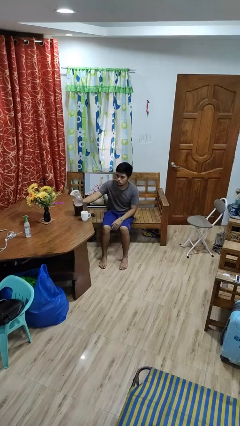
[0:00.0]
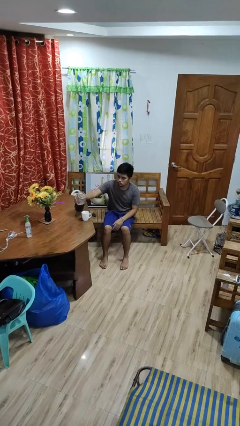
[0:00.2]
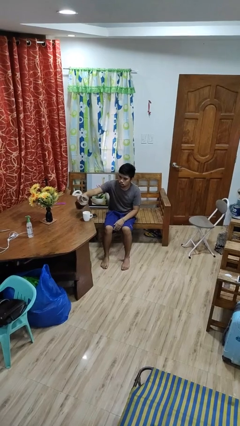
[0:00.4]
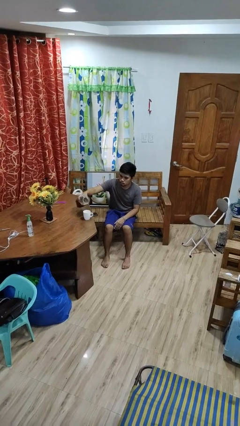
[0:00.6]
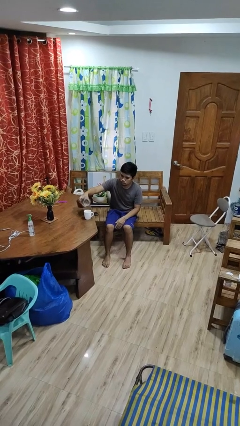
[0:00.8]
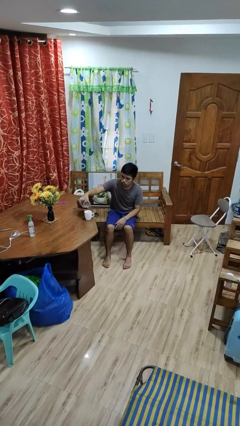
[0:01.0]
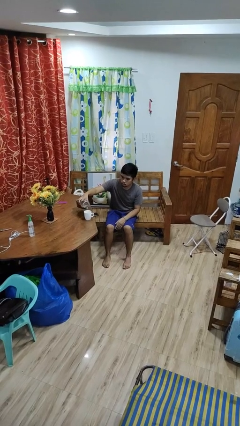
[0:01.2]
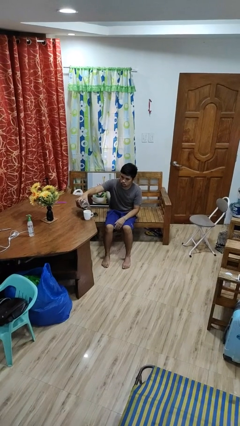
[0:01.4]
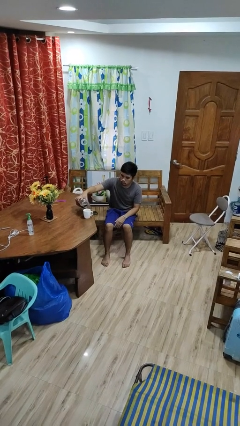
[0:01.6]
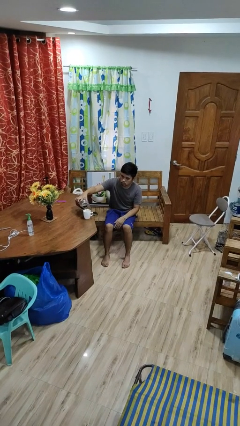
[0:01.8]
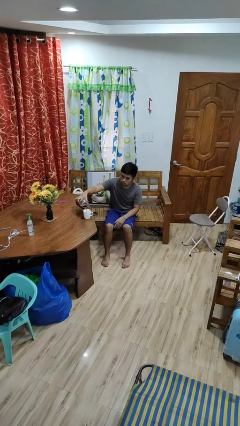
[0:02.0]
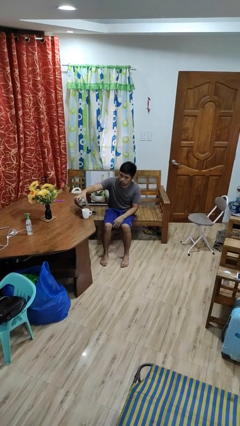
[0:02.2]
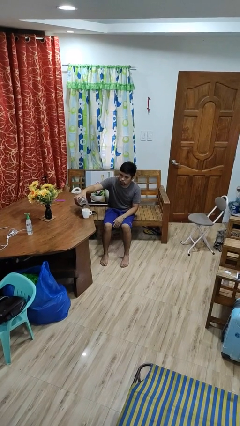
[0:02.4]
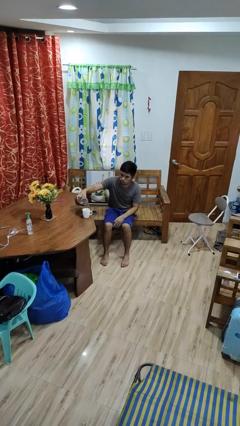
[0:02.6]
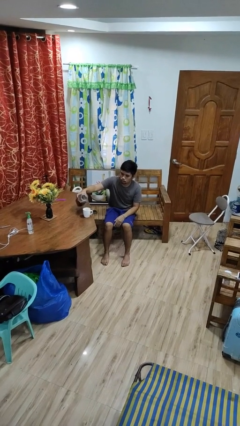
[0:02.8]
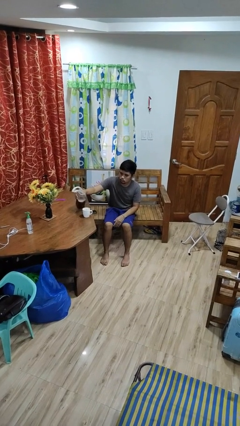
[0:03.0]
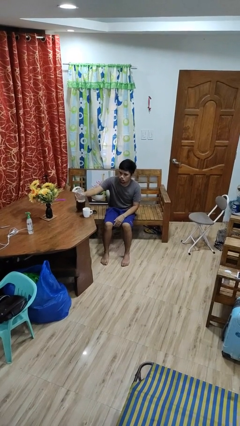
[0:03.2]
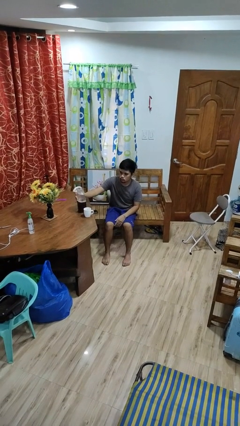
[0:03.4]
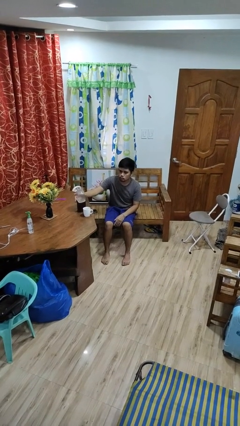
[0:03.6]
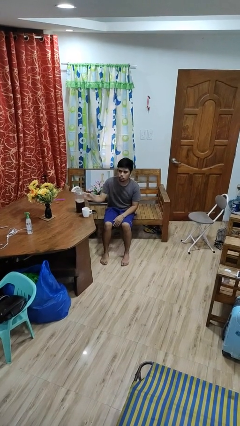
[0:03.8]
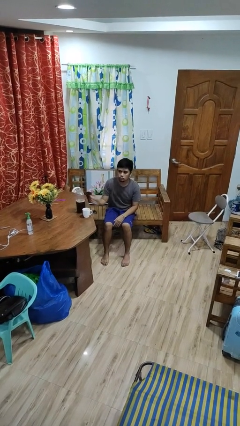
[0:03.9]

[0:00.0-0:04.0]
person pours coffee into mug

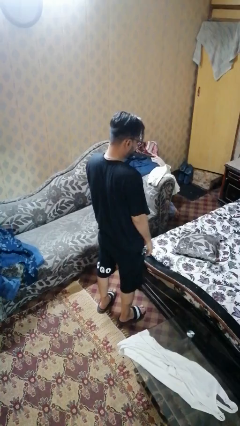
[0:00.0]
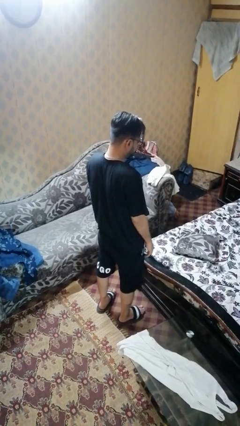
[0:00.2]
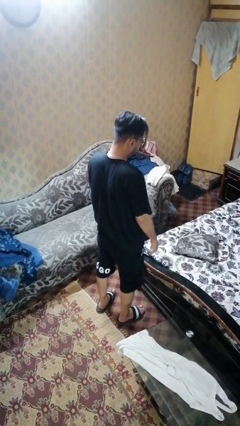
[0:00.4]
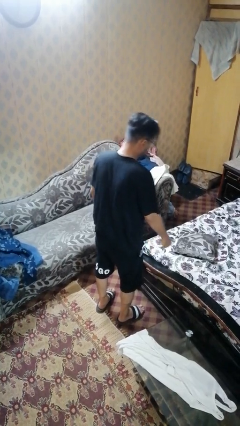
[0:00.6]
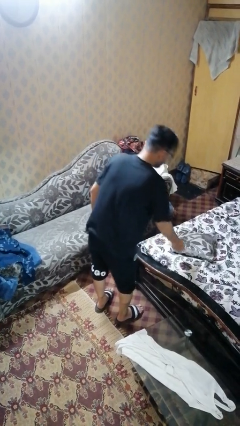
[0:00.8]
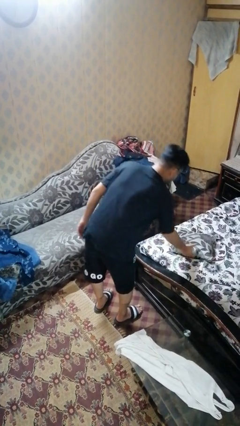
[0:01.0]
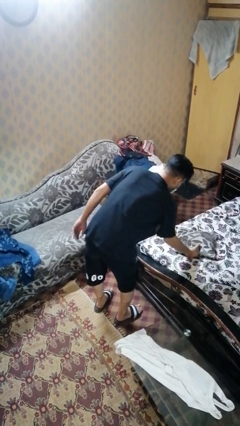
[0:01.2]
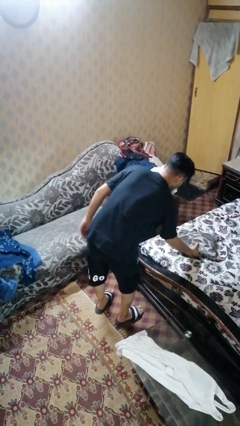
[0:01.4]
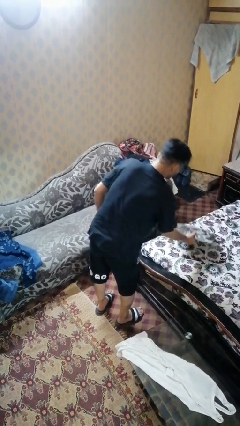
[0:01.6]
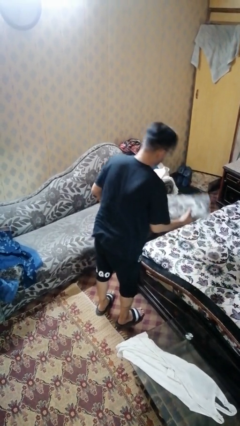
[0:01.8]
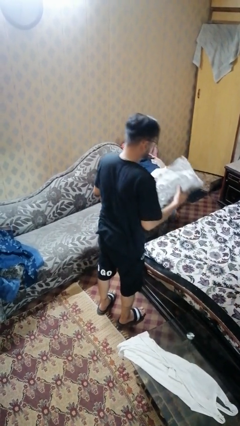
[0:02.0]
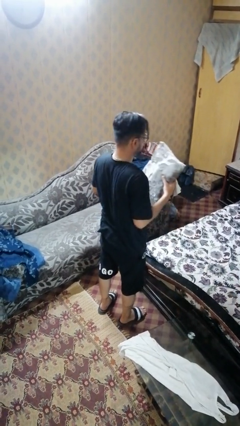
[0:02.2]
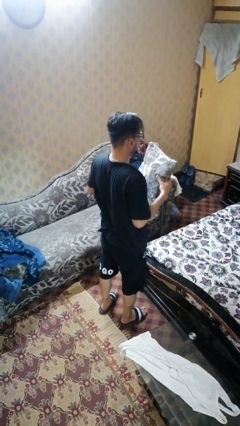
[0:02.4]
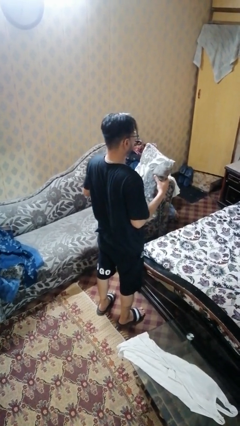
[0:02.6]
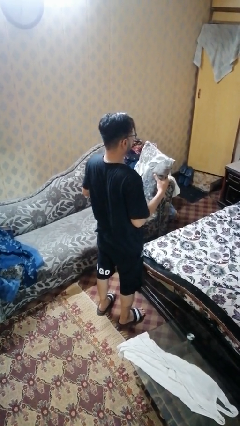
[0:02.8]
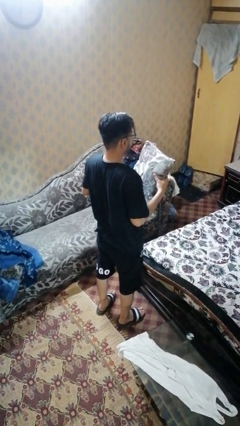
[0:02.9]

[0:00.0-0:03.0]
person picks up object from bed

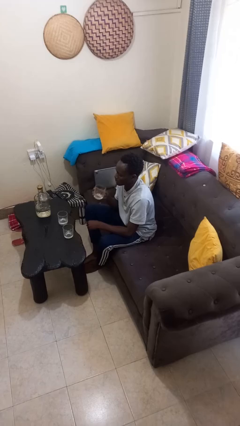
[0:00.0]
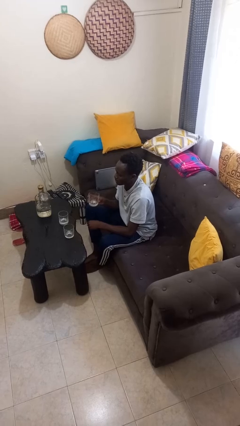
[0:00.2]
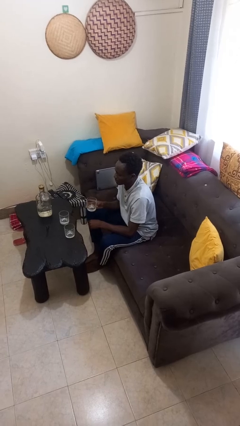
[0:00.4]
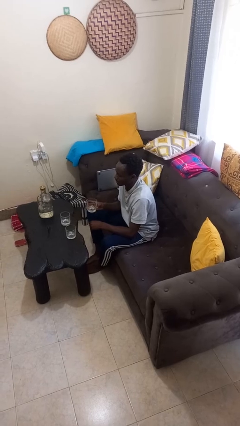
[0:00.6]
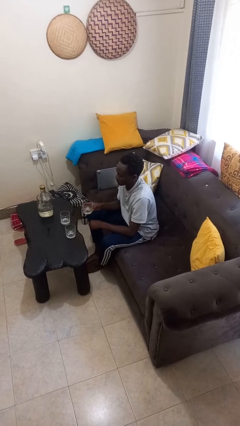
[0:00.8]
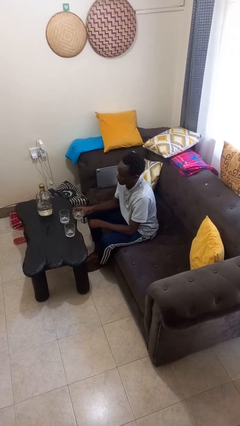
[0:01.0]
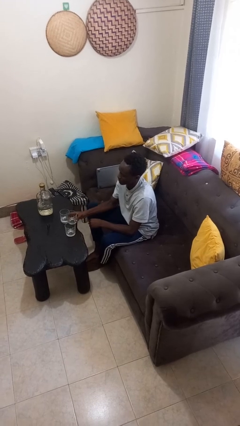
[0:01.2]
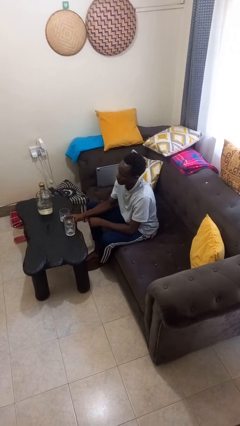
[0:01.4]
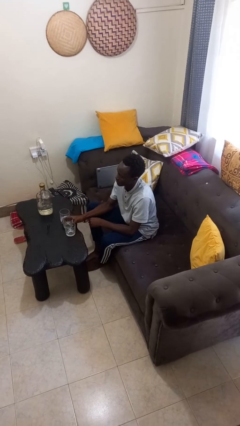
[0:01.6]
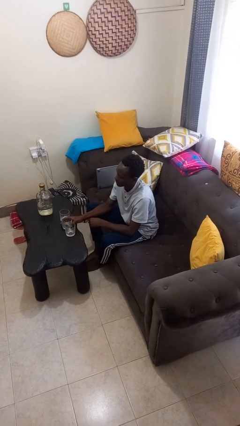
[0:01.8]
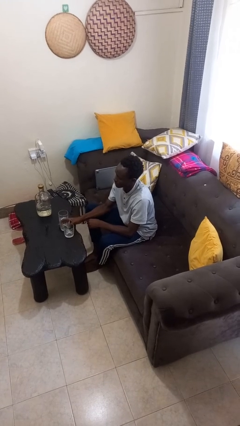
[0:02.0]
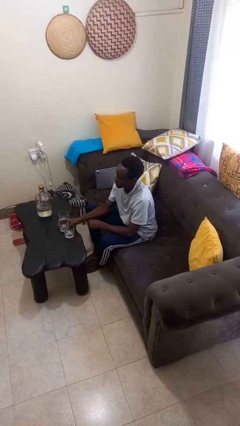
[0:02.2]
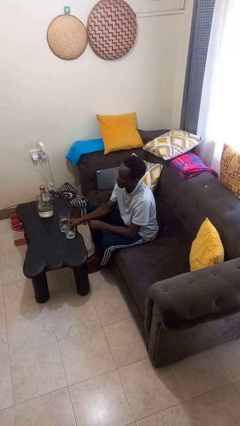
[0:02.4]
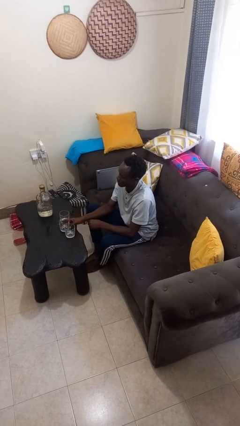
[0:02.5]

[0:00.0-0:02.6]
person puts down object on table

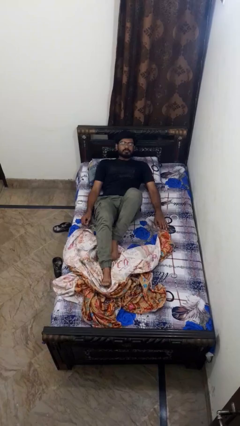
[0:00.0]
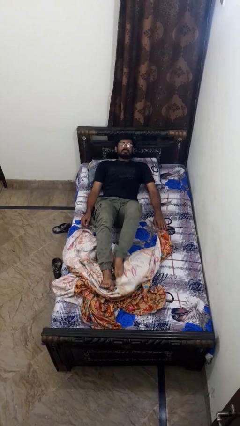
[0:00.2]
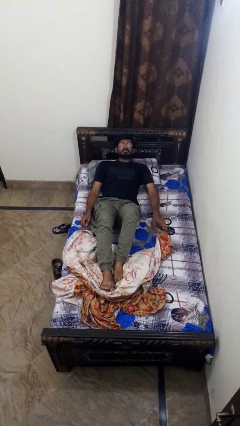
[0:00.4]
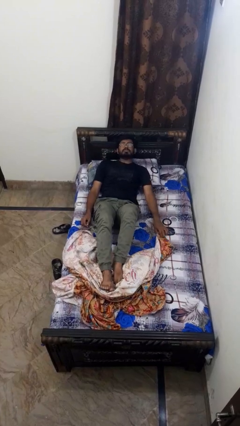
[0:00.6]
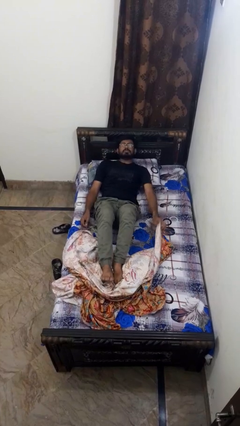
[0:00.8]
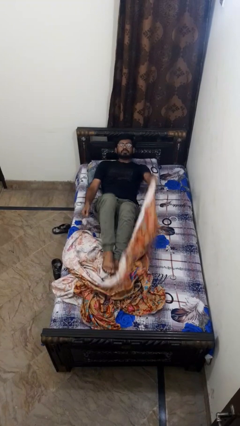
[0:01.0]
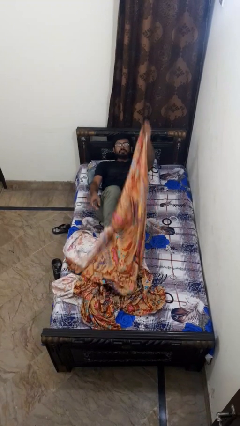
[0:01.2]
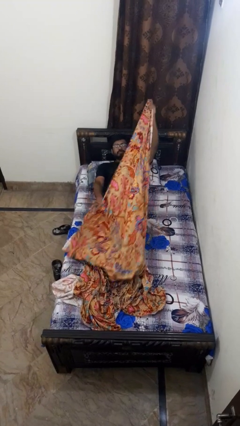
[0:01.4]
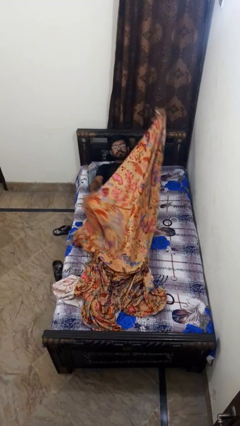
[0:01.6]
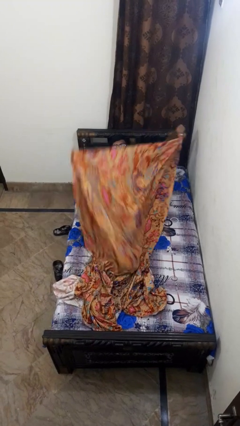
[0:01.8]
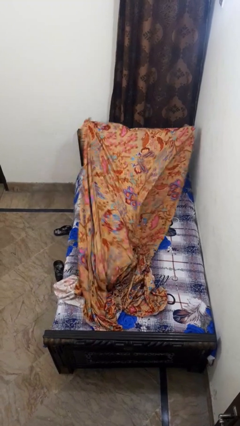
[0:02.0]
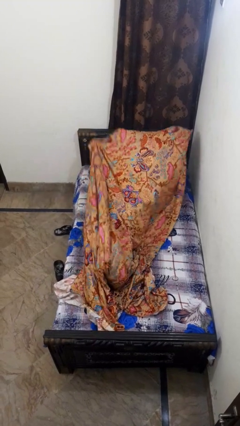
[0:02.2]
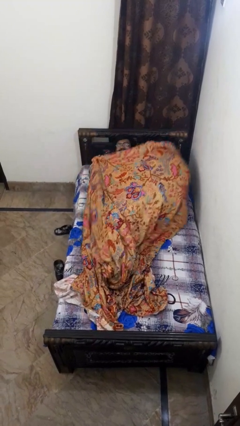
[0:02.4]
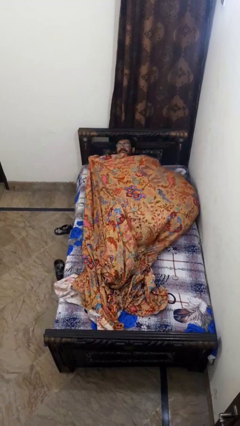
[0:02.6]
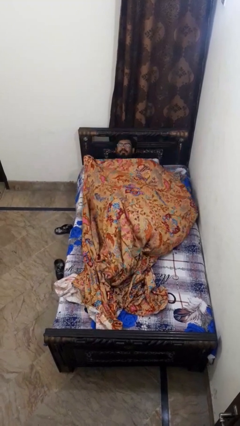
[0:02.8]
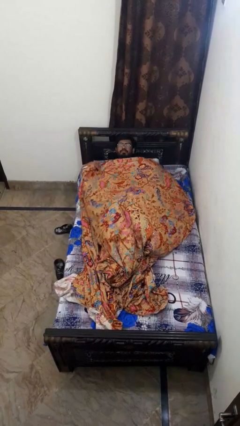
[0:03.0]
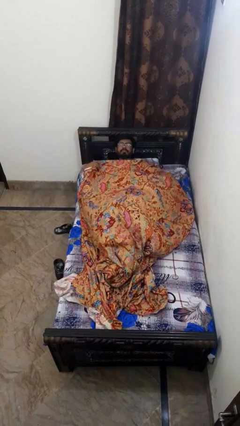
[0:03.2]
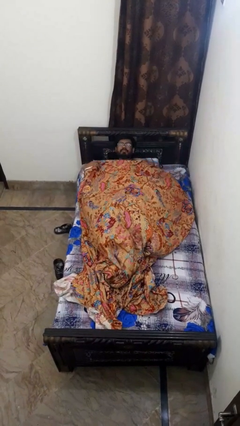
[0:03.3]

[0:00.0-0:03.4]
person covers with bedsheets

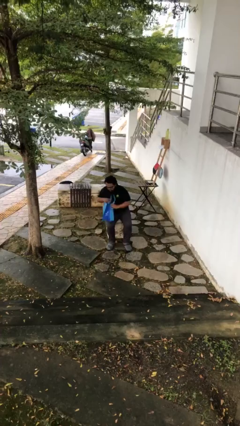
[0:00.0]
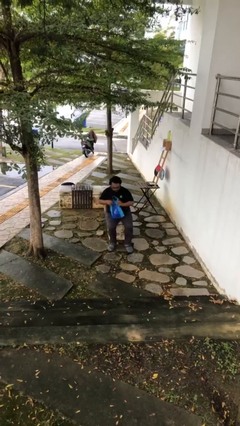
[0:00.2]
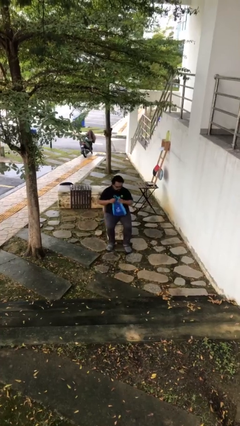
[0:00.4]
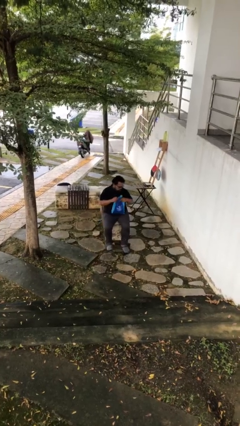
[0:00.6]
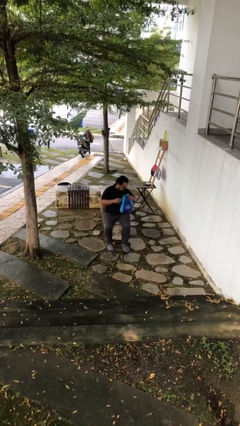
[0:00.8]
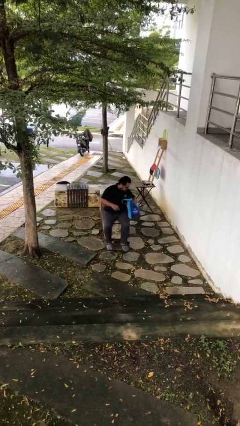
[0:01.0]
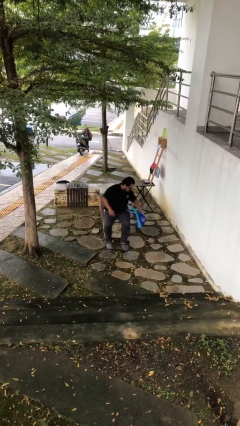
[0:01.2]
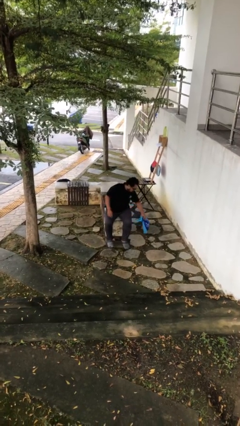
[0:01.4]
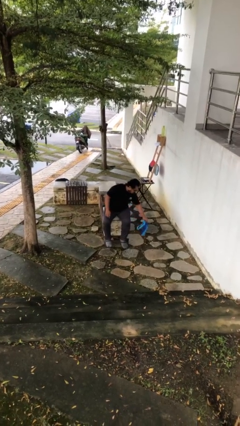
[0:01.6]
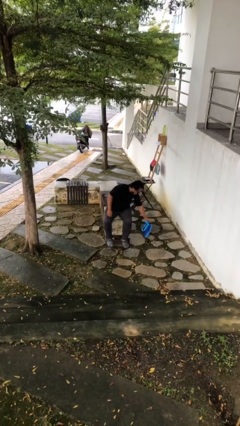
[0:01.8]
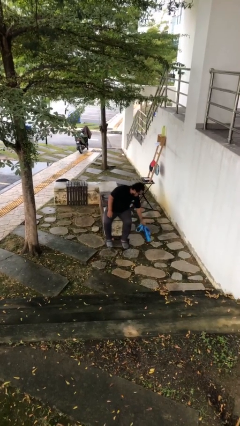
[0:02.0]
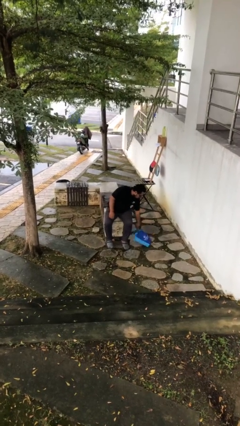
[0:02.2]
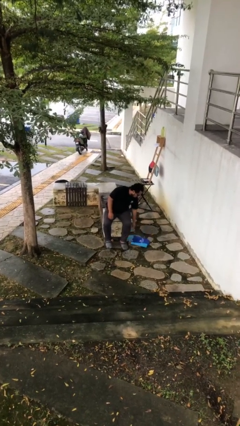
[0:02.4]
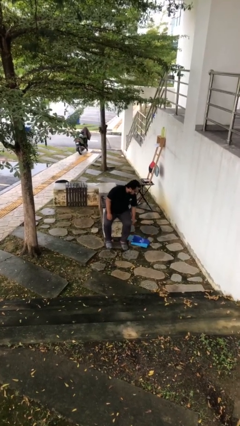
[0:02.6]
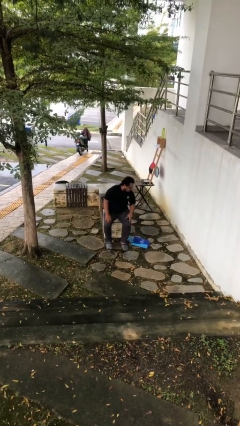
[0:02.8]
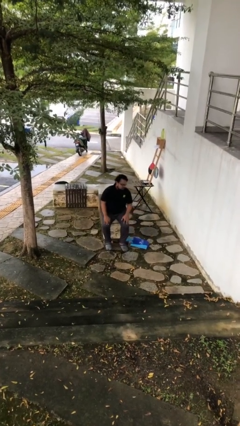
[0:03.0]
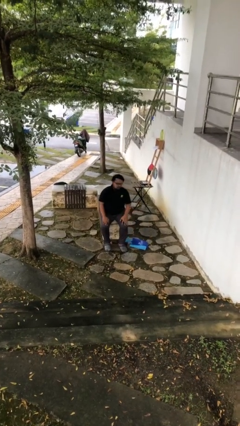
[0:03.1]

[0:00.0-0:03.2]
person puts down object on floor

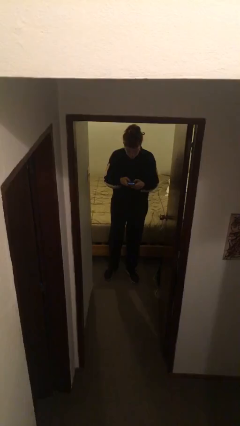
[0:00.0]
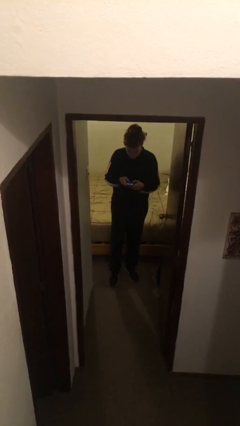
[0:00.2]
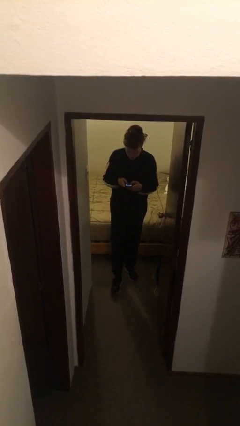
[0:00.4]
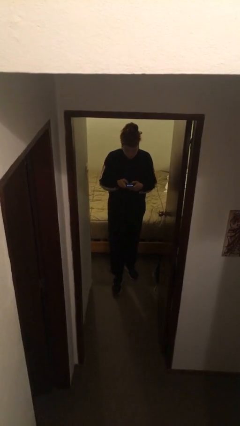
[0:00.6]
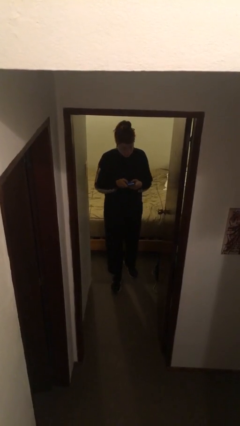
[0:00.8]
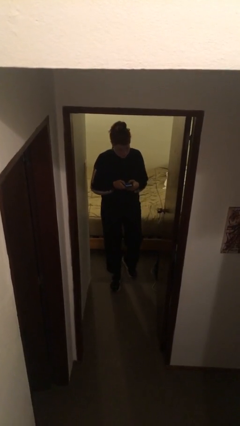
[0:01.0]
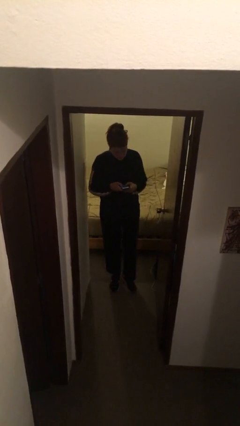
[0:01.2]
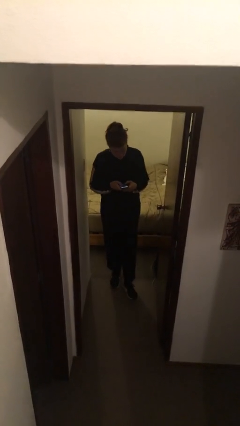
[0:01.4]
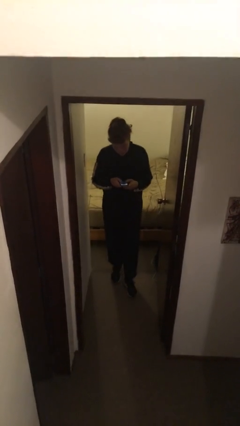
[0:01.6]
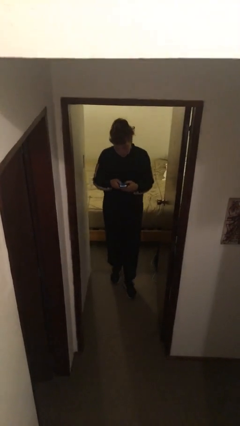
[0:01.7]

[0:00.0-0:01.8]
person texts on phone
